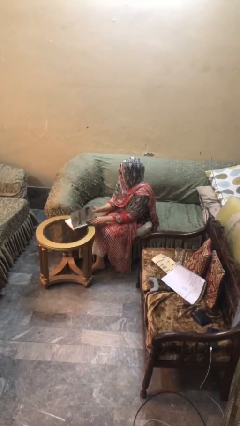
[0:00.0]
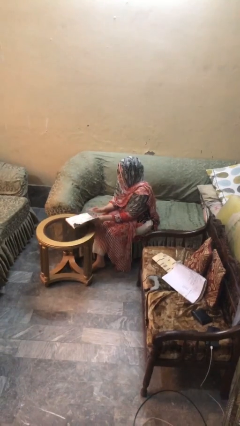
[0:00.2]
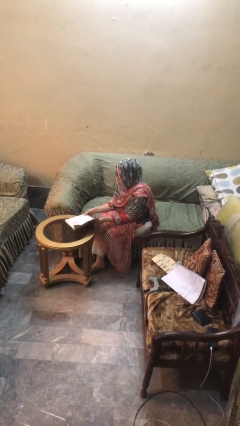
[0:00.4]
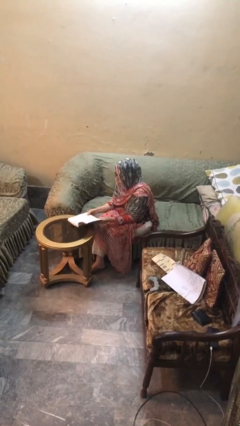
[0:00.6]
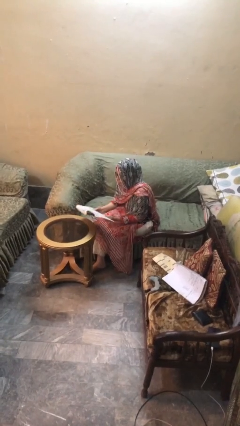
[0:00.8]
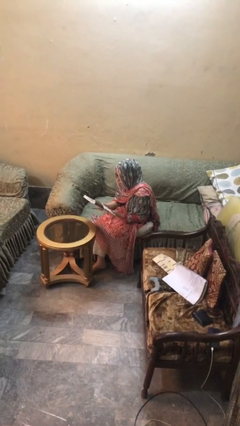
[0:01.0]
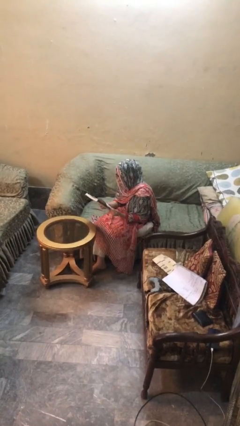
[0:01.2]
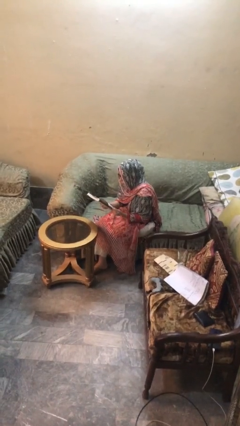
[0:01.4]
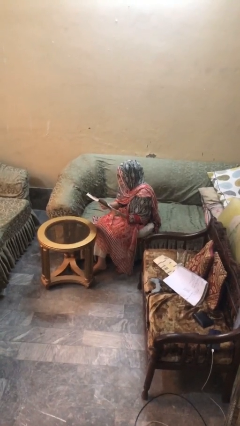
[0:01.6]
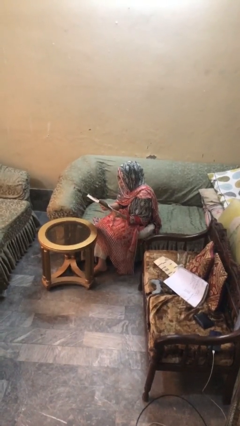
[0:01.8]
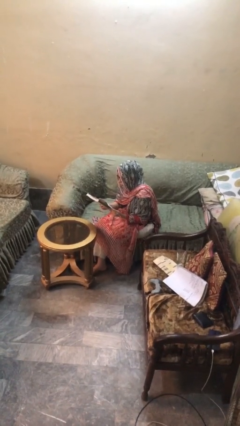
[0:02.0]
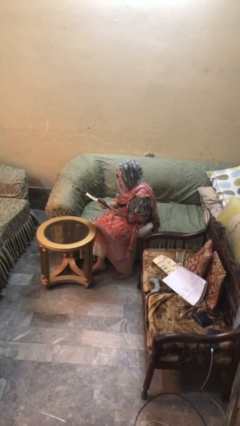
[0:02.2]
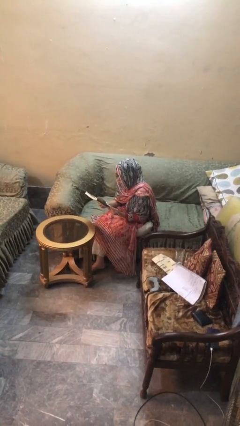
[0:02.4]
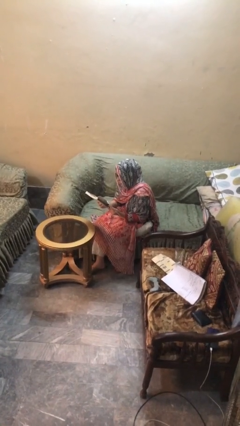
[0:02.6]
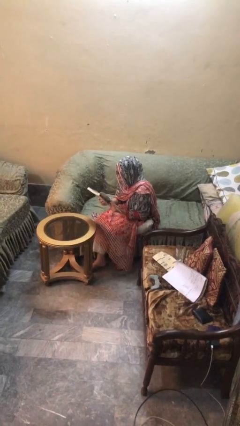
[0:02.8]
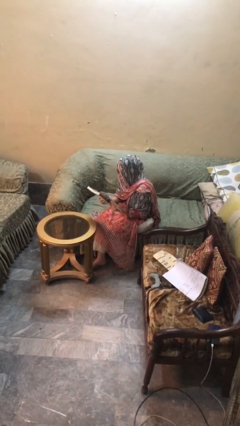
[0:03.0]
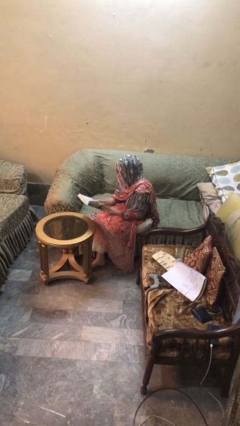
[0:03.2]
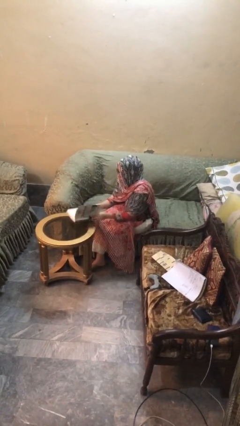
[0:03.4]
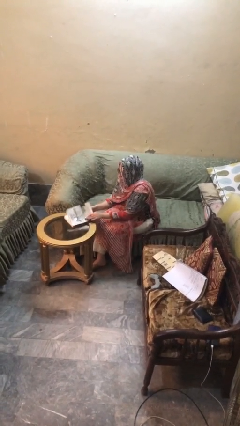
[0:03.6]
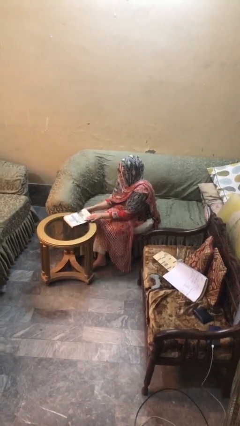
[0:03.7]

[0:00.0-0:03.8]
person reads book

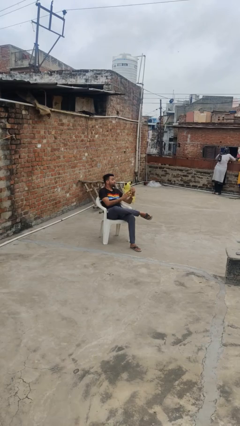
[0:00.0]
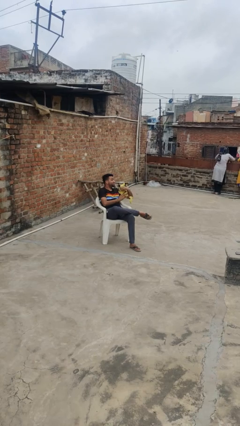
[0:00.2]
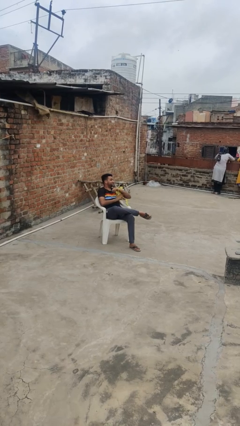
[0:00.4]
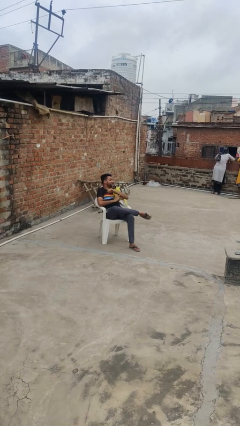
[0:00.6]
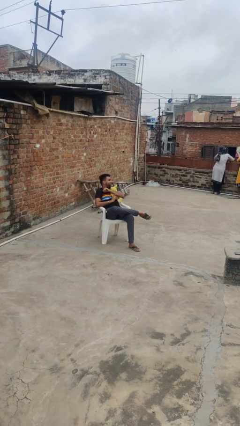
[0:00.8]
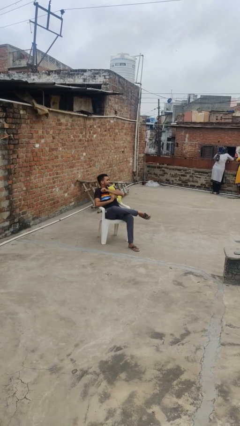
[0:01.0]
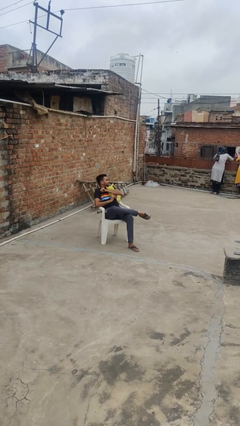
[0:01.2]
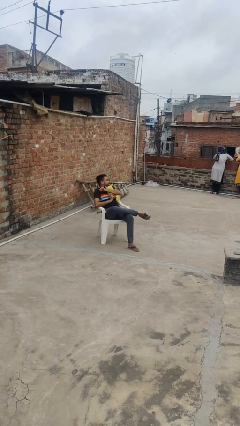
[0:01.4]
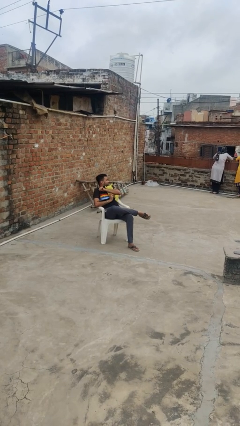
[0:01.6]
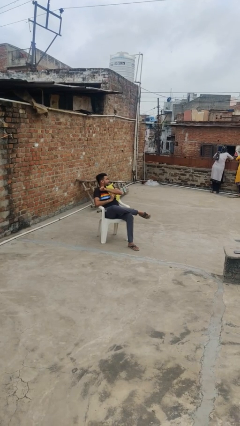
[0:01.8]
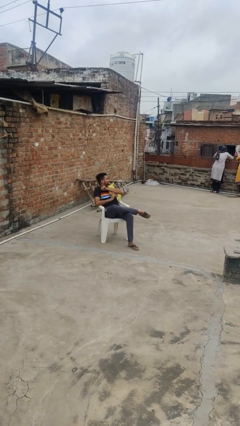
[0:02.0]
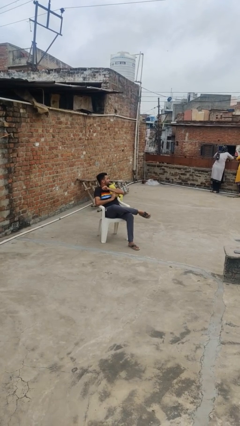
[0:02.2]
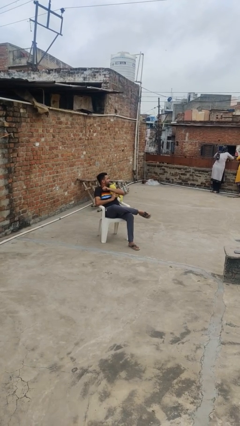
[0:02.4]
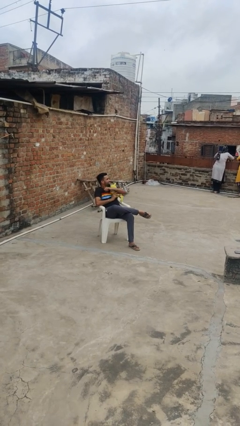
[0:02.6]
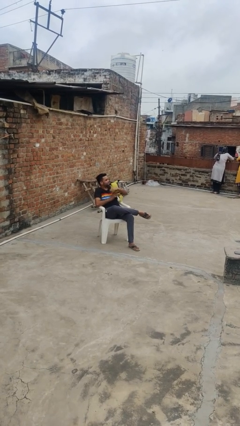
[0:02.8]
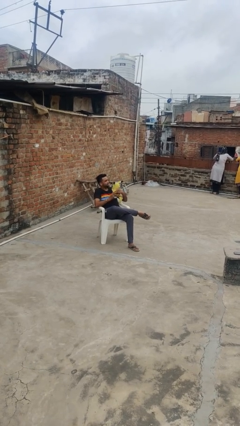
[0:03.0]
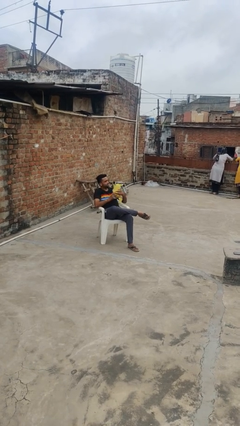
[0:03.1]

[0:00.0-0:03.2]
person hugs stuffed animal

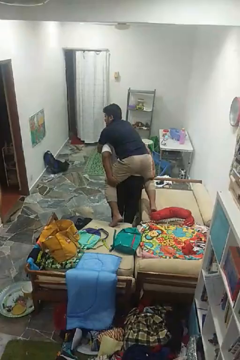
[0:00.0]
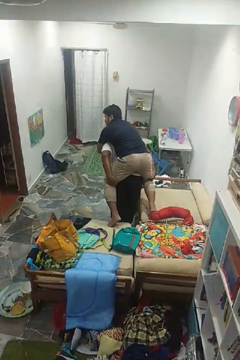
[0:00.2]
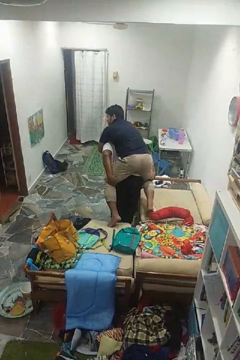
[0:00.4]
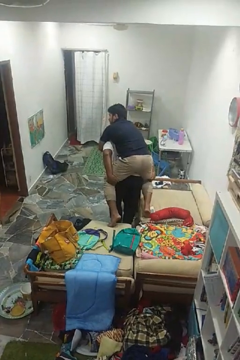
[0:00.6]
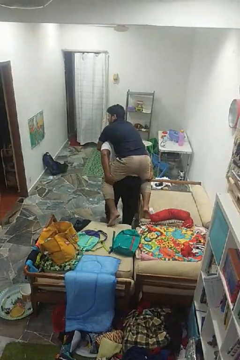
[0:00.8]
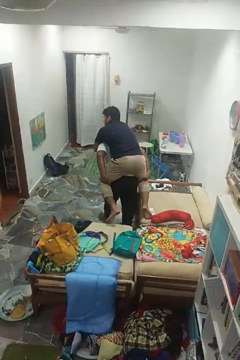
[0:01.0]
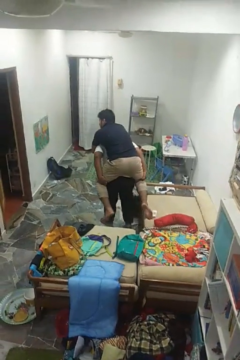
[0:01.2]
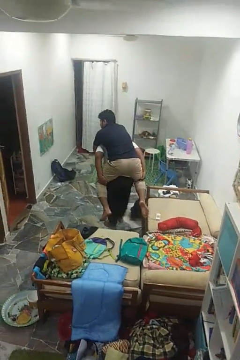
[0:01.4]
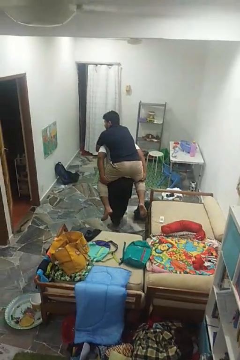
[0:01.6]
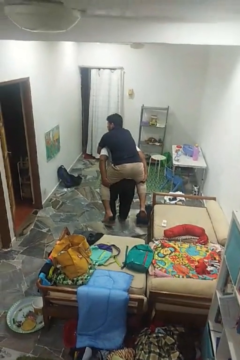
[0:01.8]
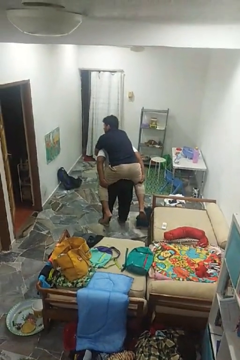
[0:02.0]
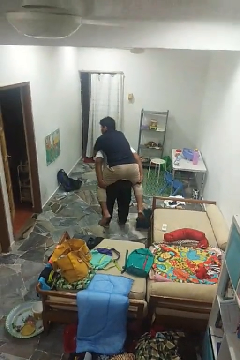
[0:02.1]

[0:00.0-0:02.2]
person carries person on back

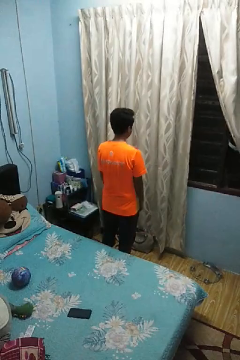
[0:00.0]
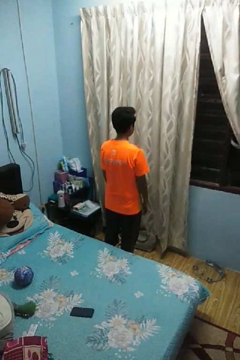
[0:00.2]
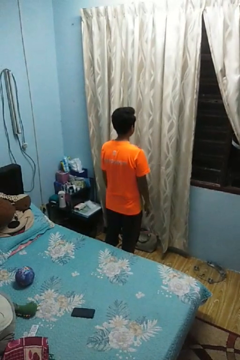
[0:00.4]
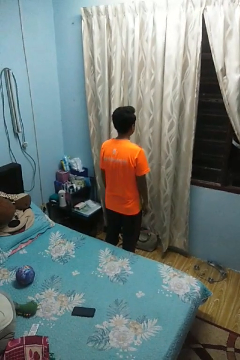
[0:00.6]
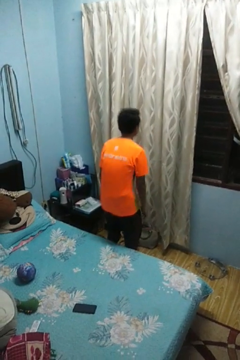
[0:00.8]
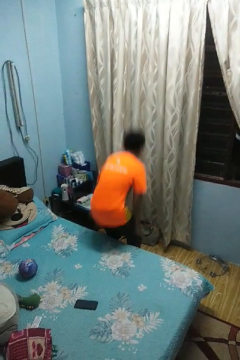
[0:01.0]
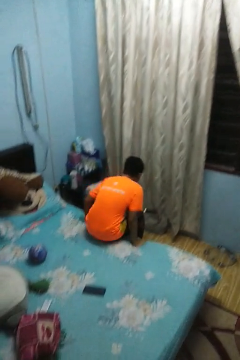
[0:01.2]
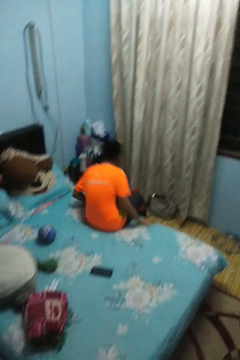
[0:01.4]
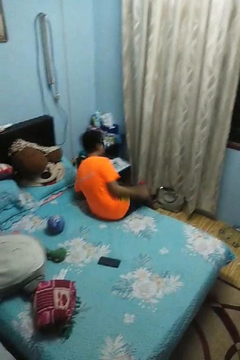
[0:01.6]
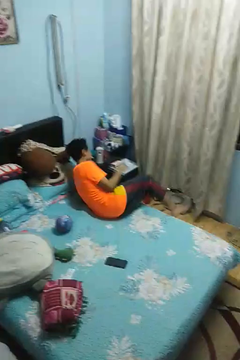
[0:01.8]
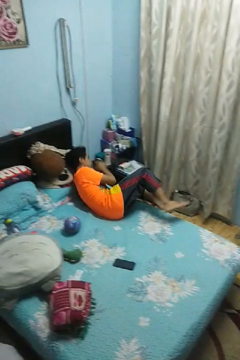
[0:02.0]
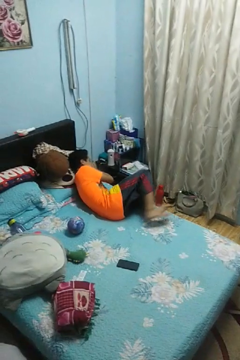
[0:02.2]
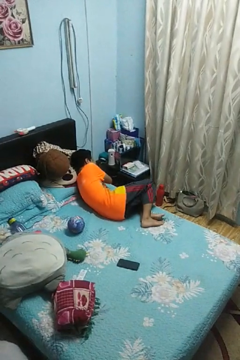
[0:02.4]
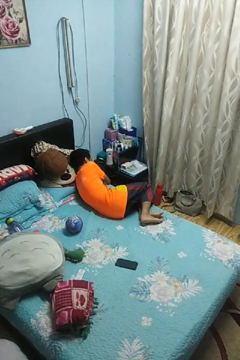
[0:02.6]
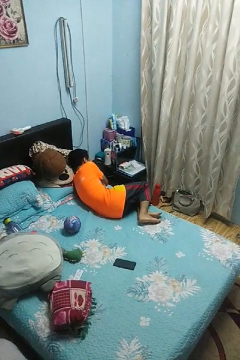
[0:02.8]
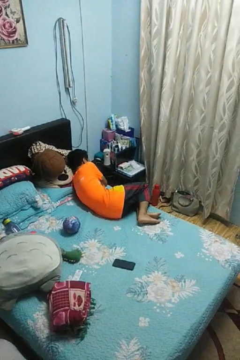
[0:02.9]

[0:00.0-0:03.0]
person lies down on bed

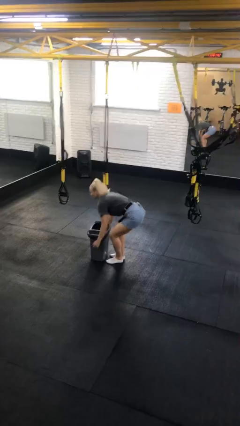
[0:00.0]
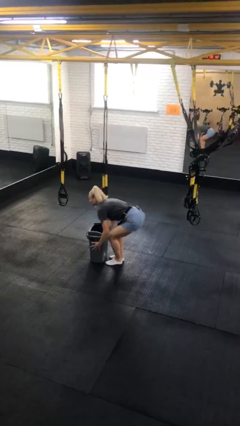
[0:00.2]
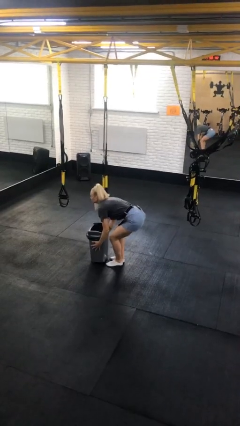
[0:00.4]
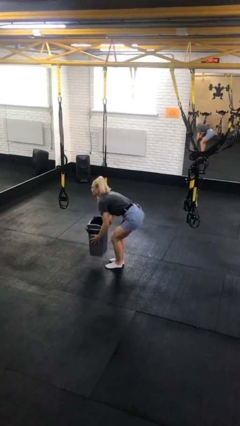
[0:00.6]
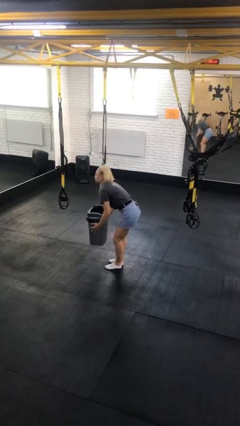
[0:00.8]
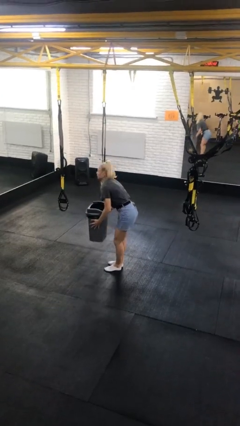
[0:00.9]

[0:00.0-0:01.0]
person picks up object from floor

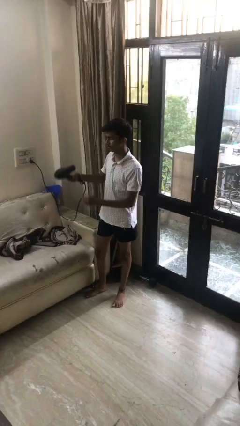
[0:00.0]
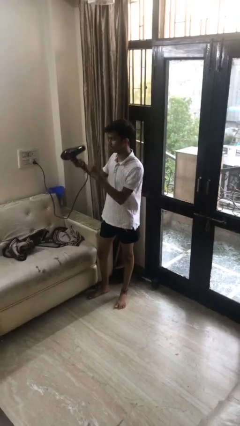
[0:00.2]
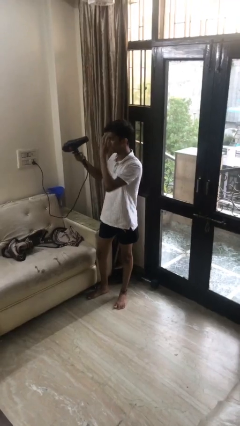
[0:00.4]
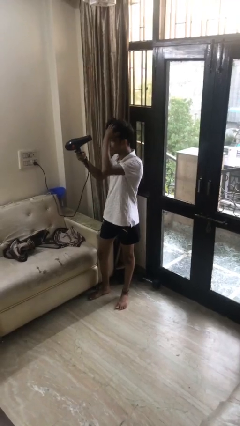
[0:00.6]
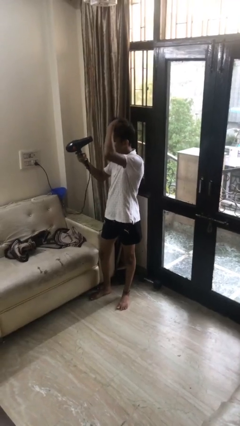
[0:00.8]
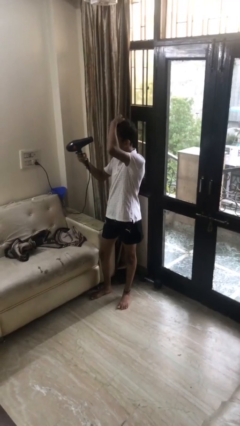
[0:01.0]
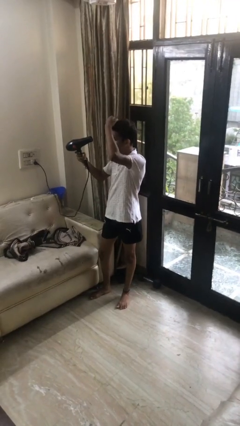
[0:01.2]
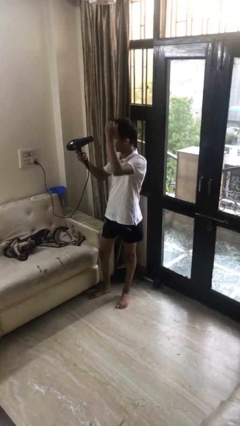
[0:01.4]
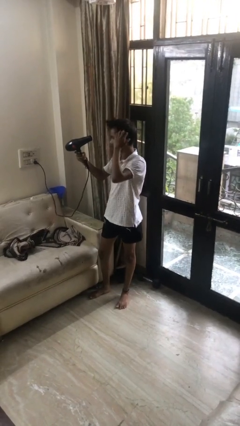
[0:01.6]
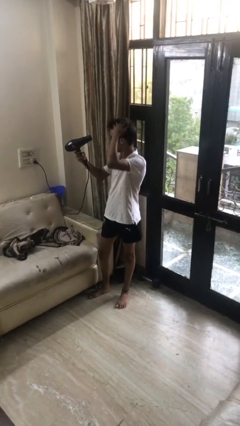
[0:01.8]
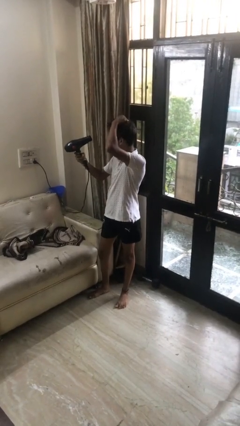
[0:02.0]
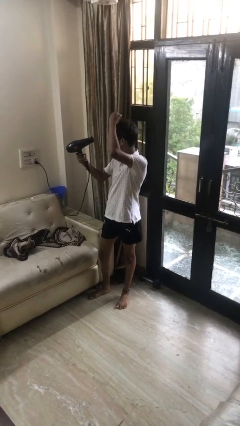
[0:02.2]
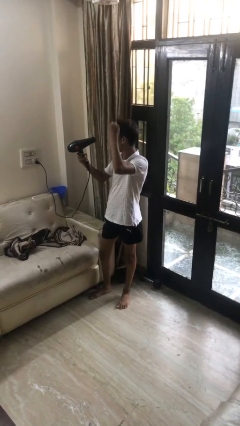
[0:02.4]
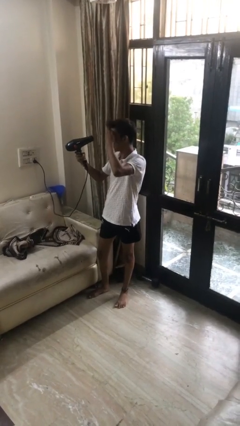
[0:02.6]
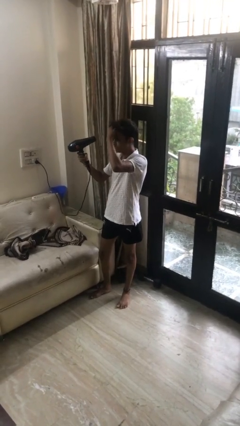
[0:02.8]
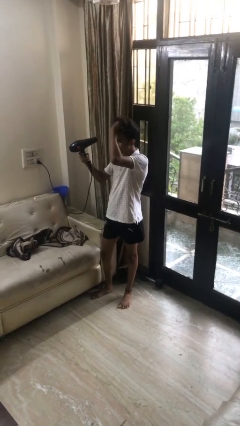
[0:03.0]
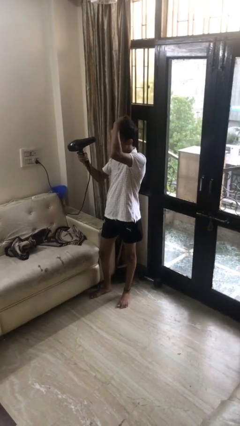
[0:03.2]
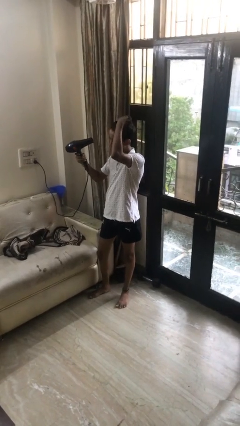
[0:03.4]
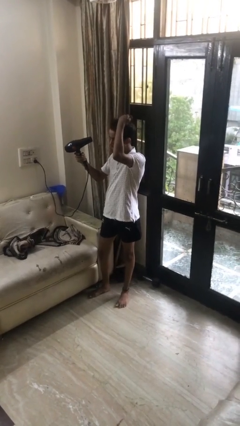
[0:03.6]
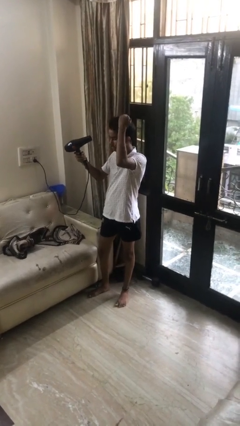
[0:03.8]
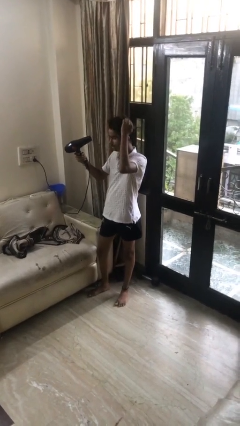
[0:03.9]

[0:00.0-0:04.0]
person dries hair with hairdryer

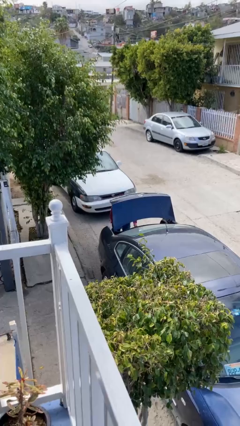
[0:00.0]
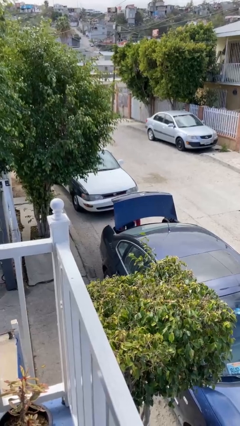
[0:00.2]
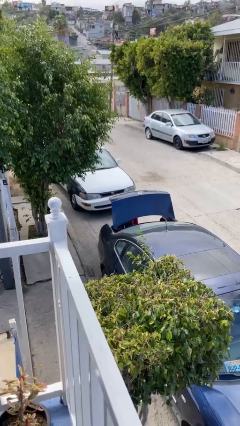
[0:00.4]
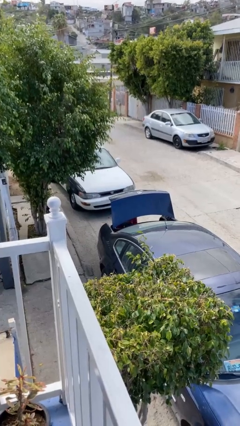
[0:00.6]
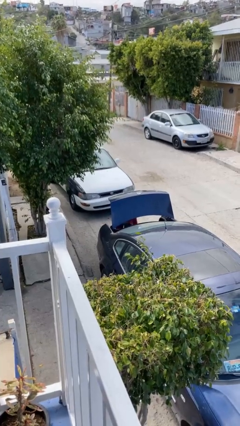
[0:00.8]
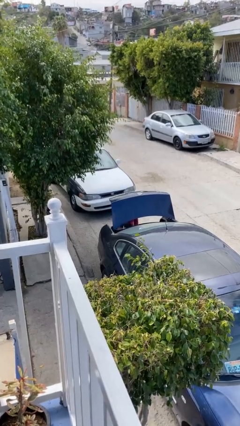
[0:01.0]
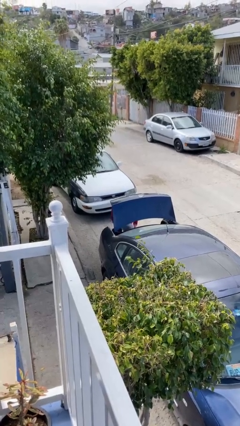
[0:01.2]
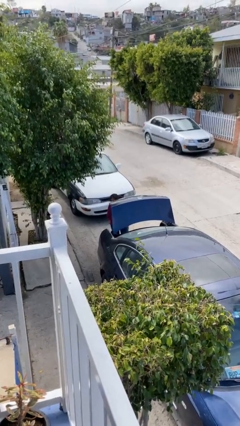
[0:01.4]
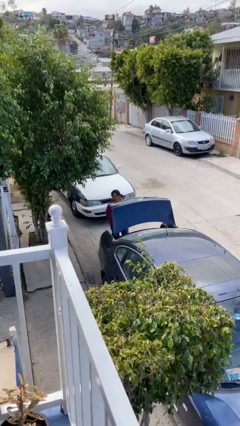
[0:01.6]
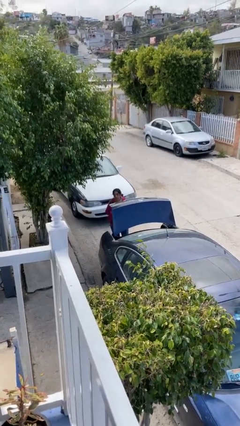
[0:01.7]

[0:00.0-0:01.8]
person unloads car
